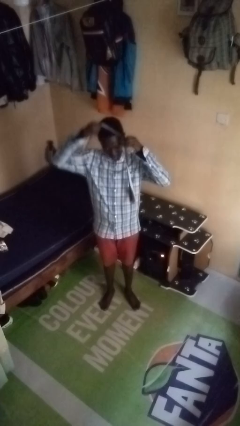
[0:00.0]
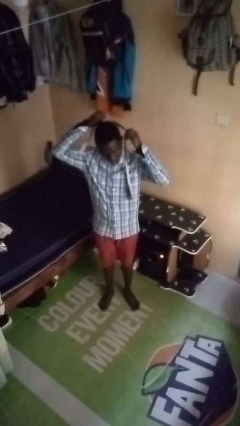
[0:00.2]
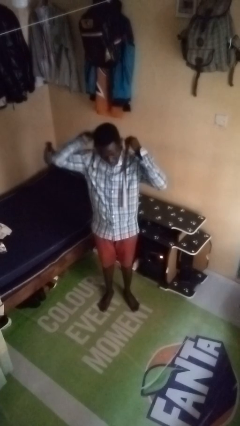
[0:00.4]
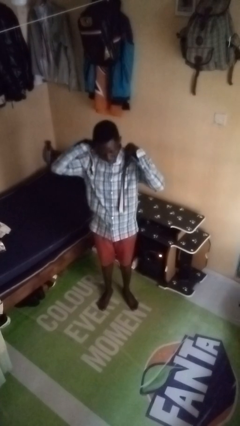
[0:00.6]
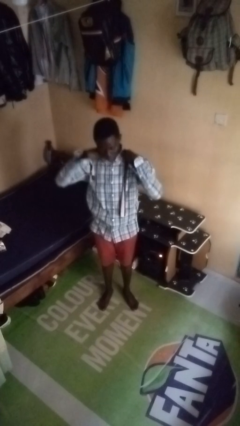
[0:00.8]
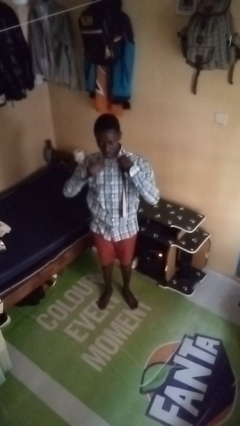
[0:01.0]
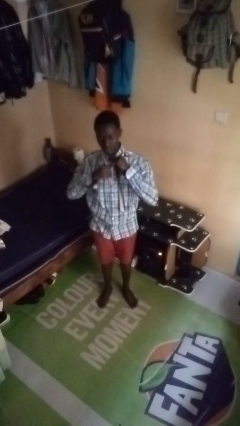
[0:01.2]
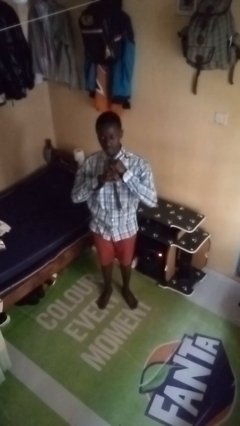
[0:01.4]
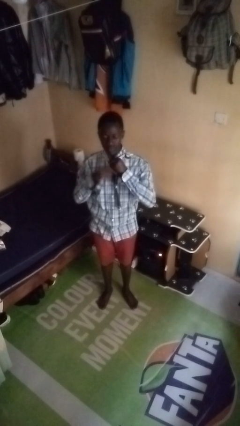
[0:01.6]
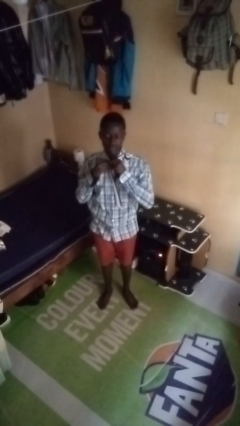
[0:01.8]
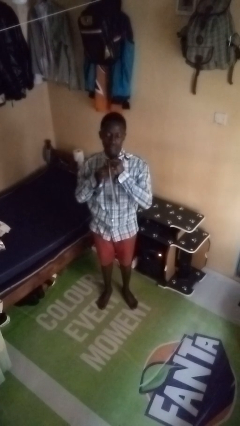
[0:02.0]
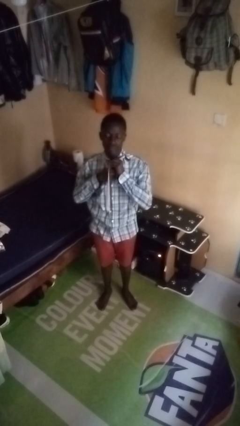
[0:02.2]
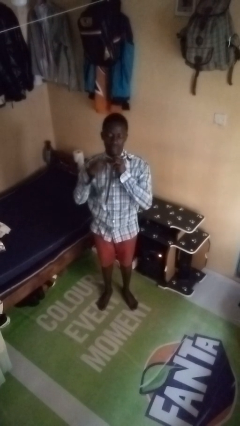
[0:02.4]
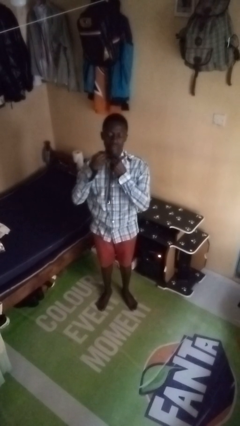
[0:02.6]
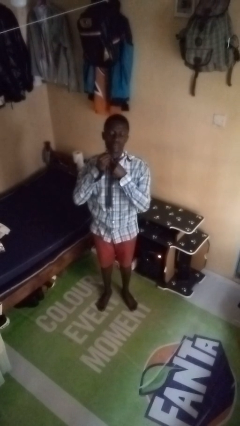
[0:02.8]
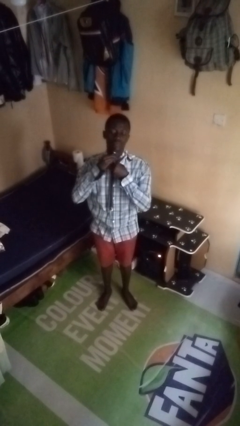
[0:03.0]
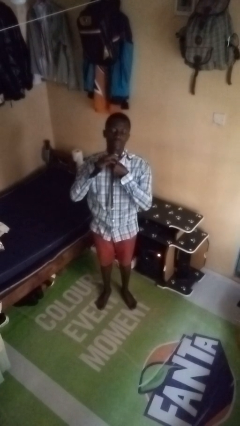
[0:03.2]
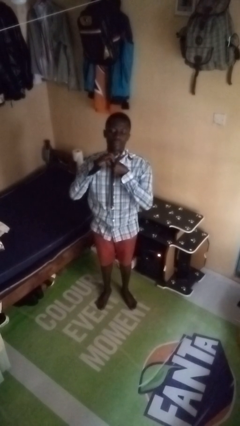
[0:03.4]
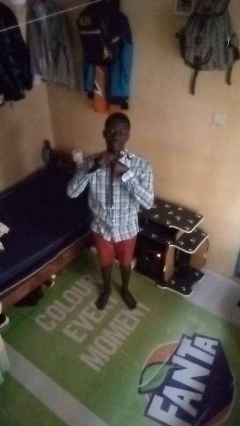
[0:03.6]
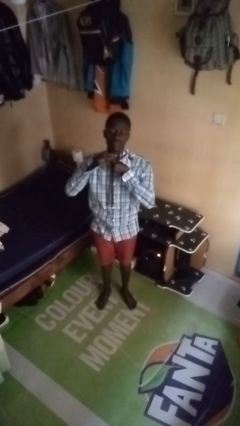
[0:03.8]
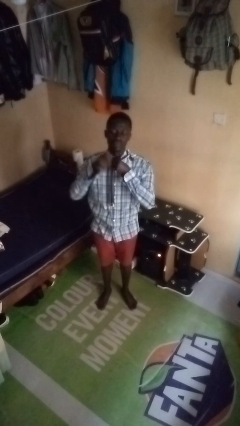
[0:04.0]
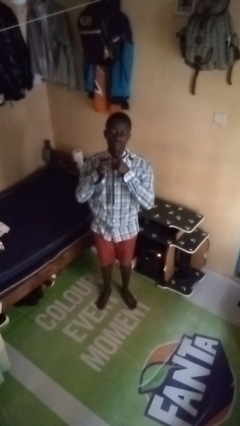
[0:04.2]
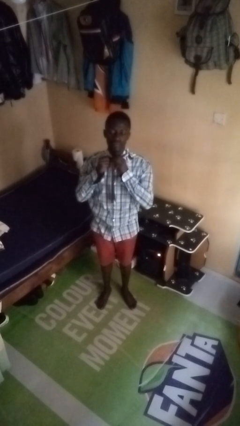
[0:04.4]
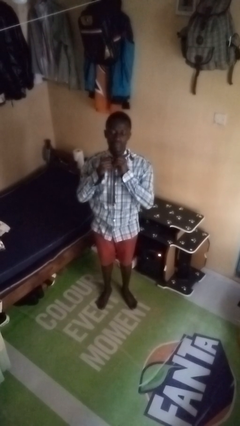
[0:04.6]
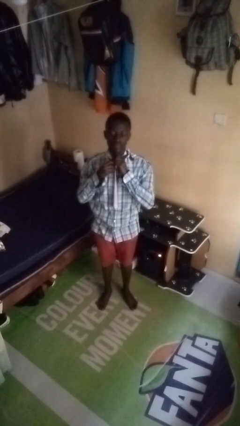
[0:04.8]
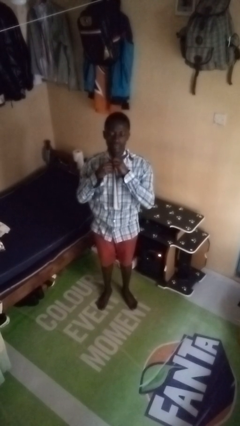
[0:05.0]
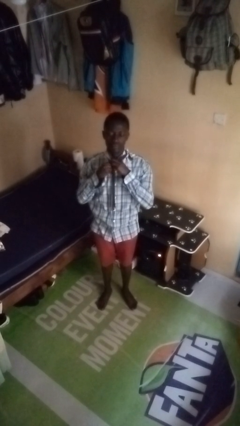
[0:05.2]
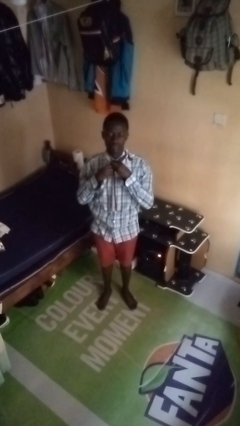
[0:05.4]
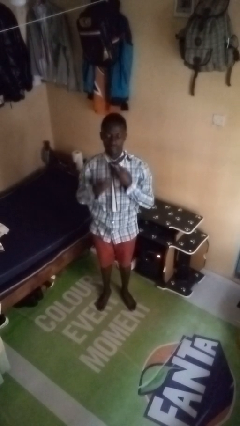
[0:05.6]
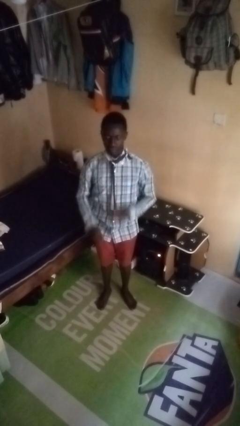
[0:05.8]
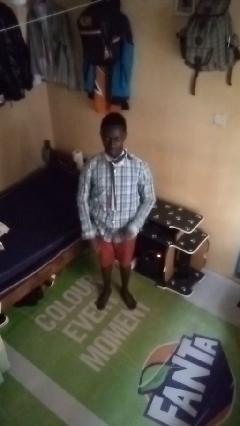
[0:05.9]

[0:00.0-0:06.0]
person puts on necktie

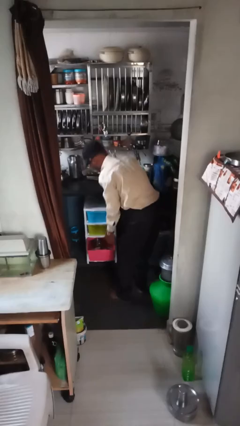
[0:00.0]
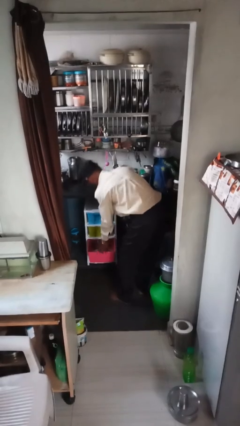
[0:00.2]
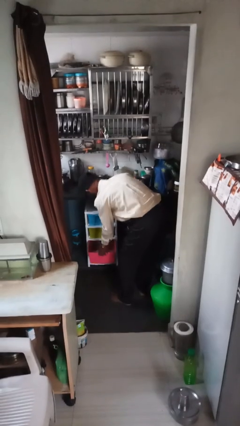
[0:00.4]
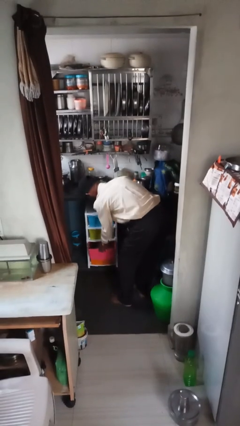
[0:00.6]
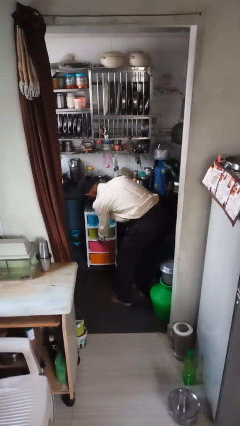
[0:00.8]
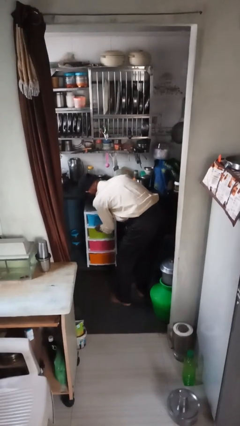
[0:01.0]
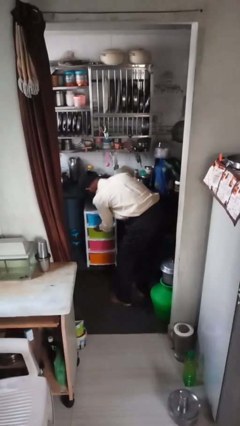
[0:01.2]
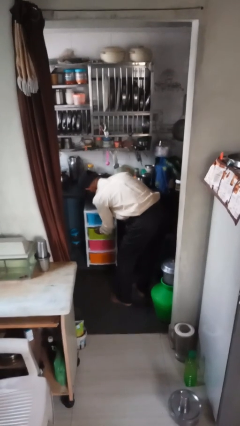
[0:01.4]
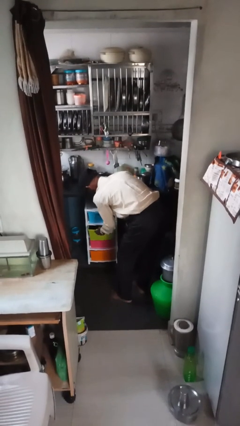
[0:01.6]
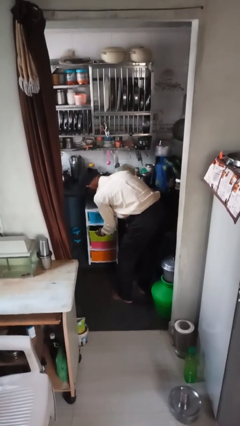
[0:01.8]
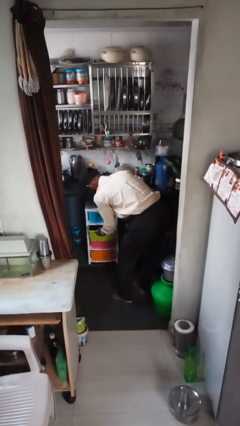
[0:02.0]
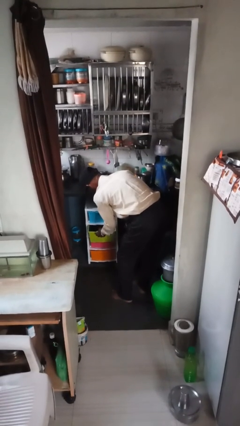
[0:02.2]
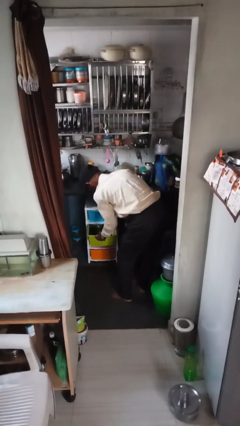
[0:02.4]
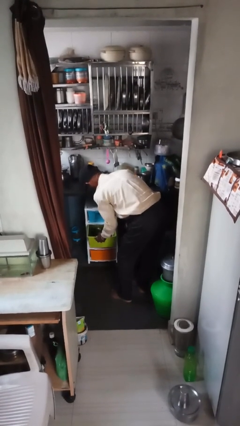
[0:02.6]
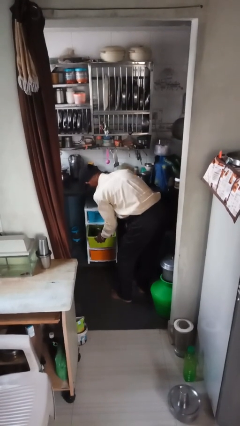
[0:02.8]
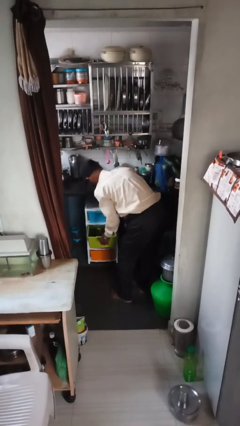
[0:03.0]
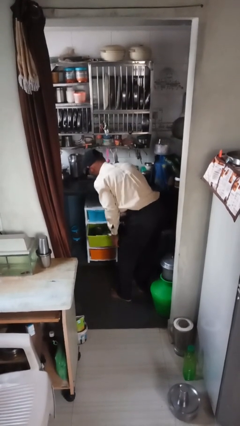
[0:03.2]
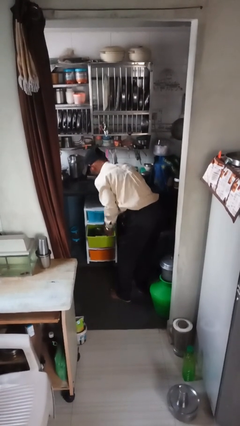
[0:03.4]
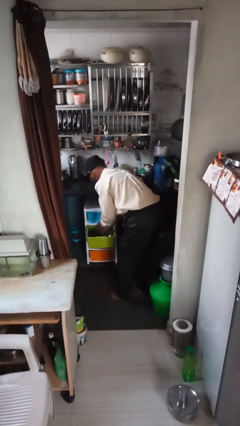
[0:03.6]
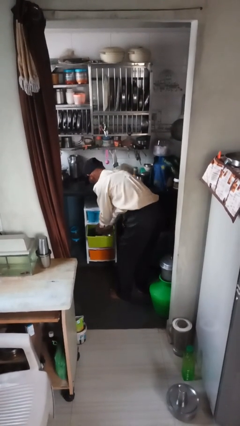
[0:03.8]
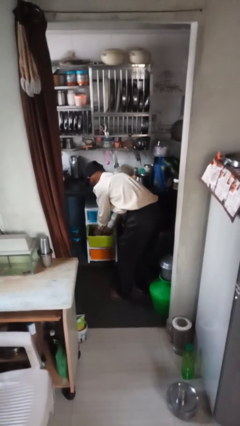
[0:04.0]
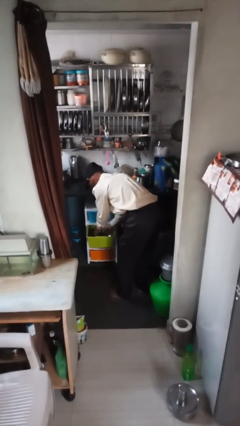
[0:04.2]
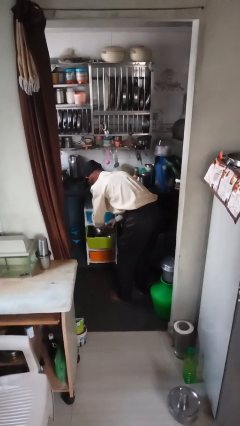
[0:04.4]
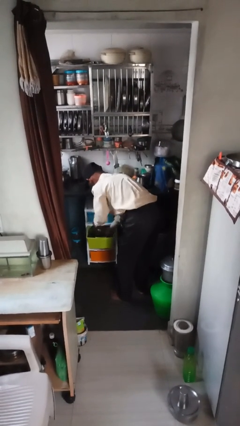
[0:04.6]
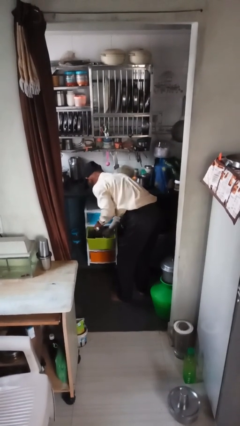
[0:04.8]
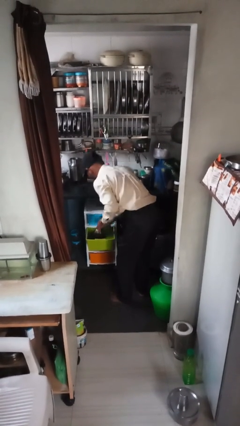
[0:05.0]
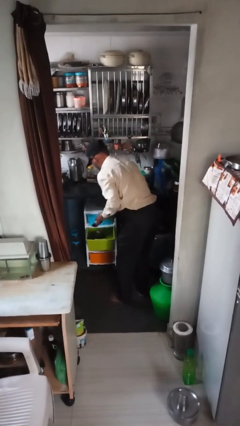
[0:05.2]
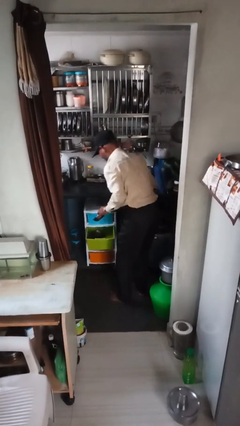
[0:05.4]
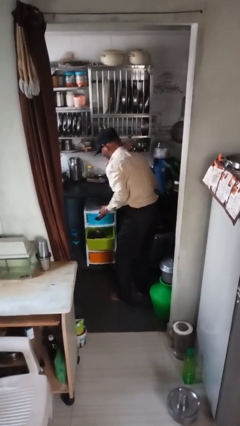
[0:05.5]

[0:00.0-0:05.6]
person takes object from kitchen drawer

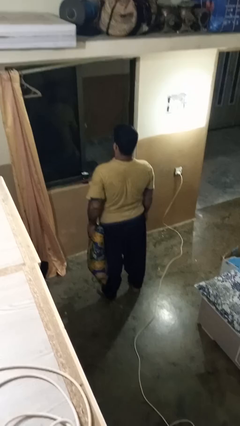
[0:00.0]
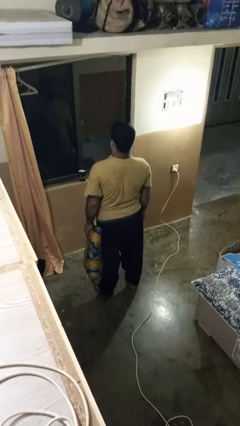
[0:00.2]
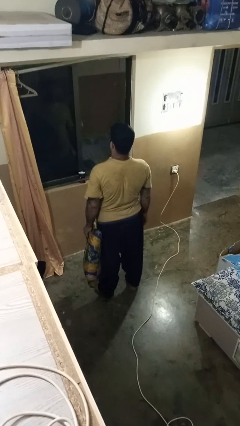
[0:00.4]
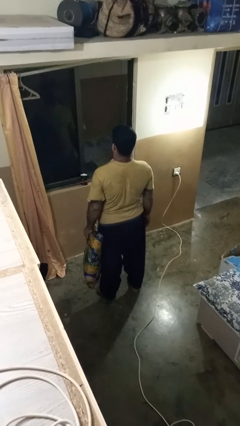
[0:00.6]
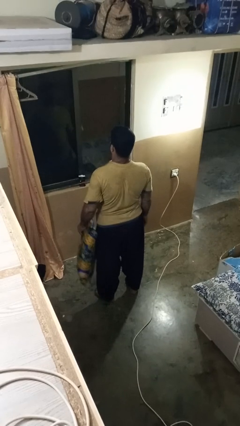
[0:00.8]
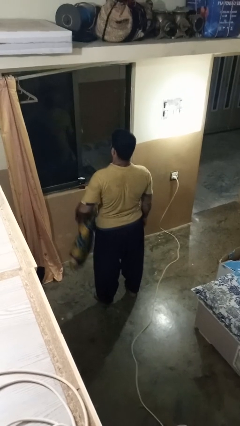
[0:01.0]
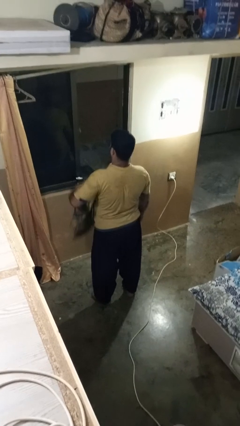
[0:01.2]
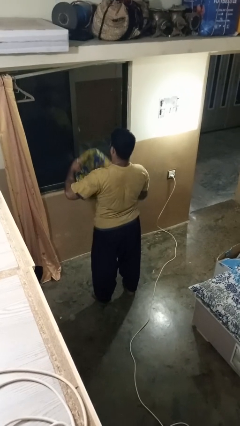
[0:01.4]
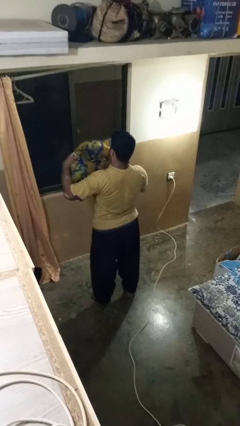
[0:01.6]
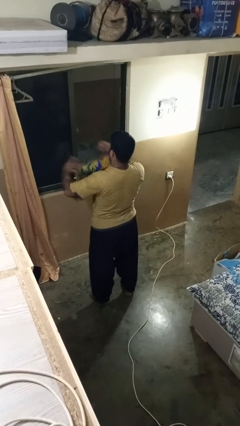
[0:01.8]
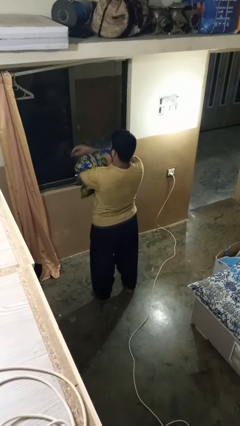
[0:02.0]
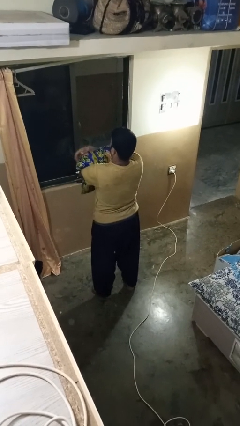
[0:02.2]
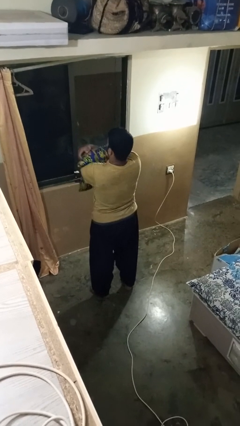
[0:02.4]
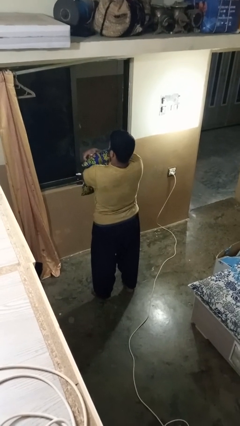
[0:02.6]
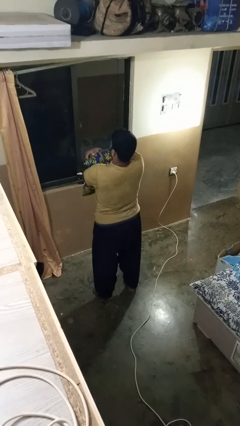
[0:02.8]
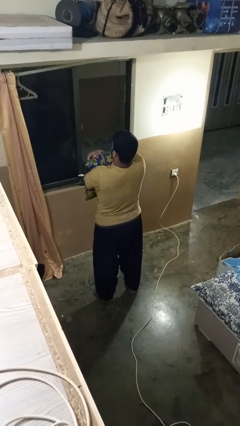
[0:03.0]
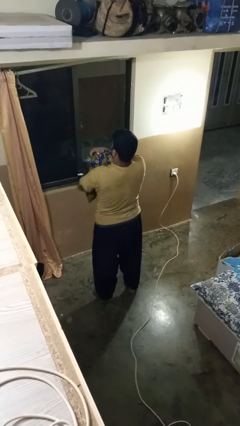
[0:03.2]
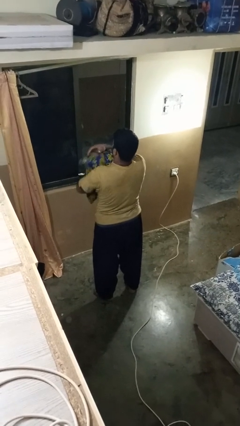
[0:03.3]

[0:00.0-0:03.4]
person squeezes object

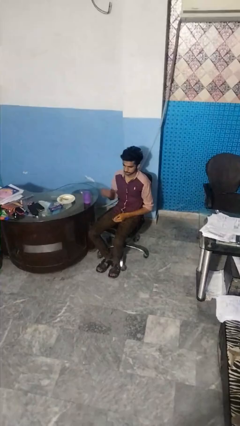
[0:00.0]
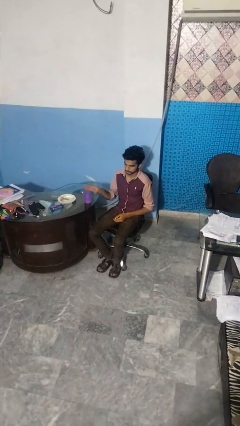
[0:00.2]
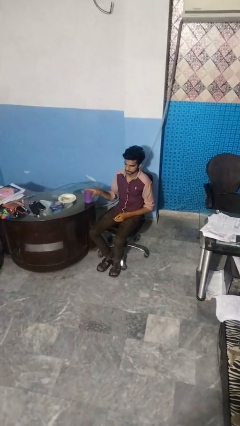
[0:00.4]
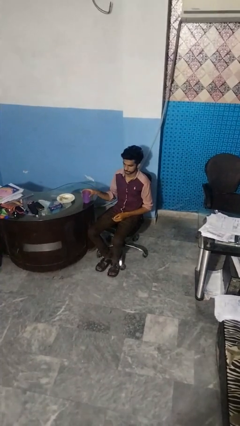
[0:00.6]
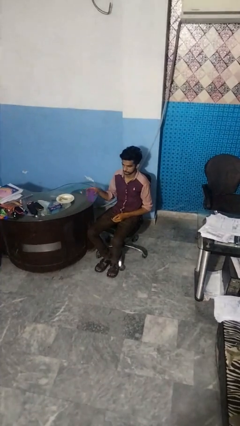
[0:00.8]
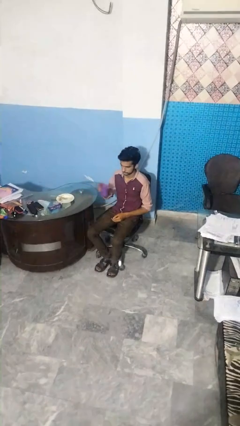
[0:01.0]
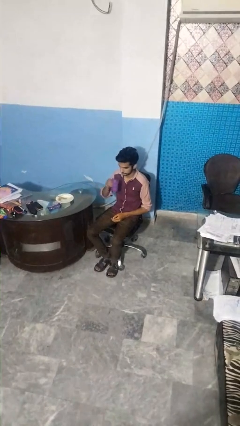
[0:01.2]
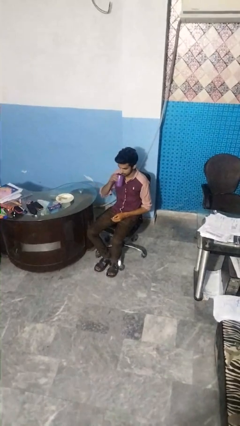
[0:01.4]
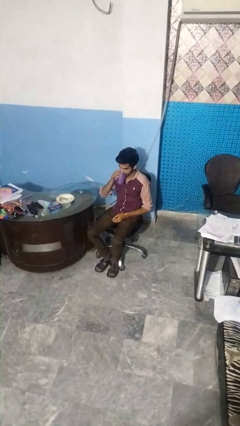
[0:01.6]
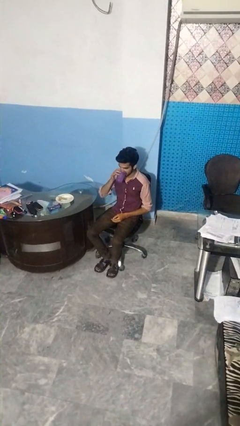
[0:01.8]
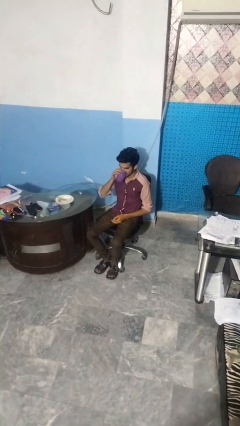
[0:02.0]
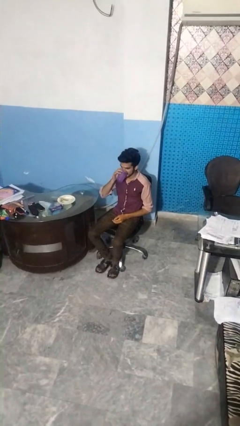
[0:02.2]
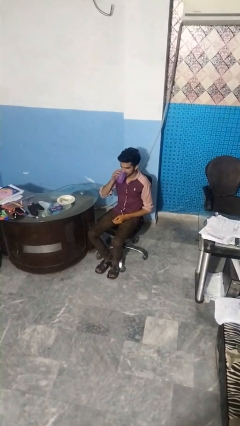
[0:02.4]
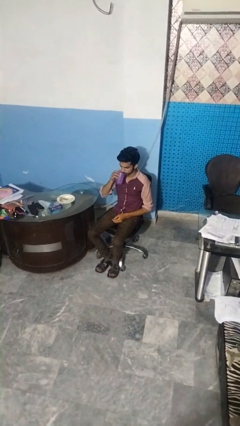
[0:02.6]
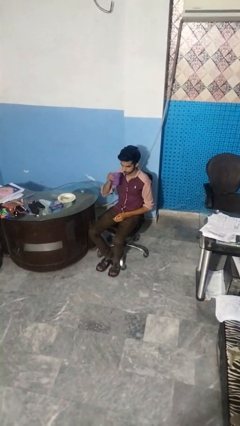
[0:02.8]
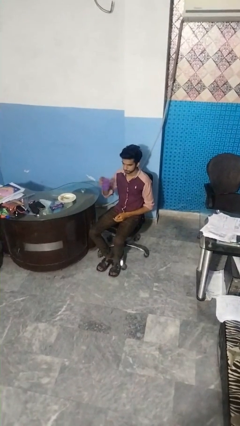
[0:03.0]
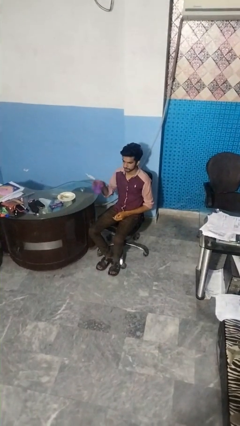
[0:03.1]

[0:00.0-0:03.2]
person drinks from cup
